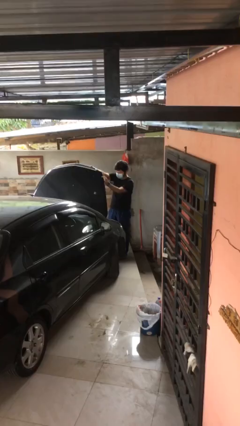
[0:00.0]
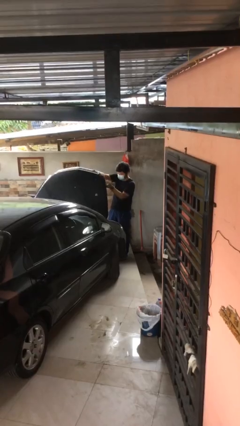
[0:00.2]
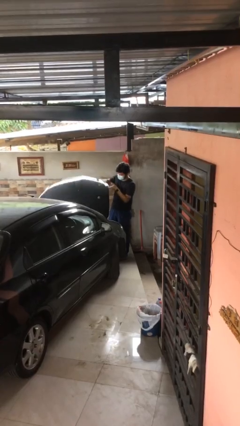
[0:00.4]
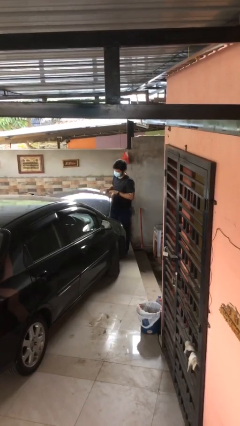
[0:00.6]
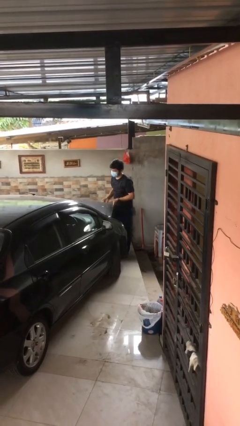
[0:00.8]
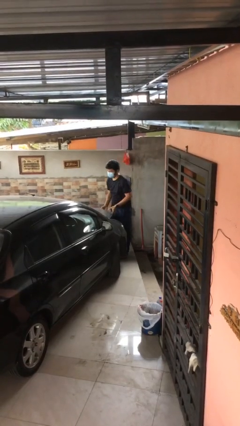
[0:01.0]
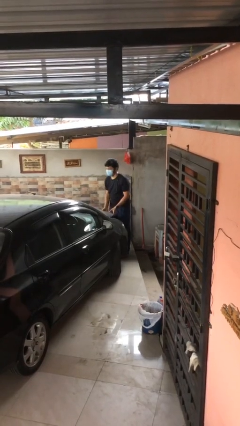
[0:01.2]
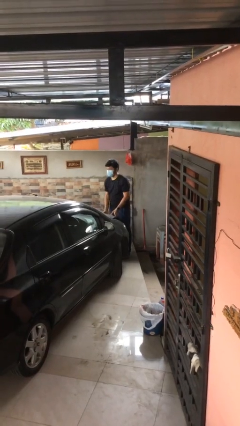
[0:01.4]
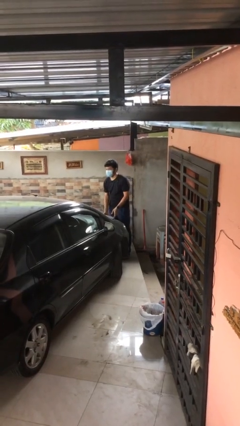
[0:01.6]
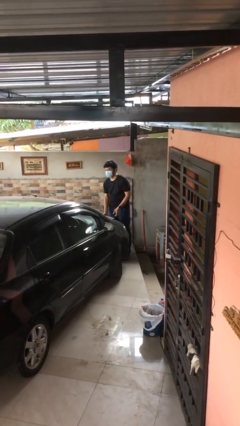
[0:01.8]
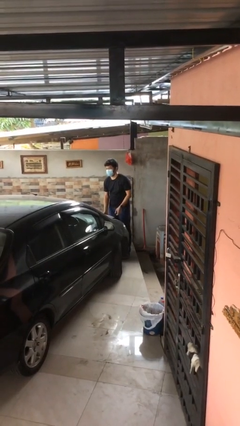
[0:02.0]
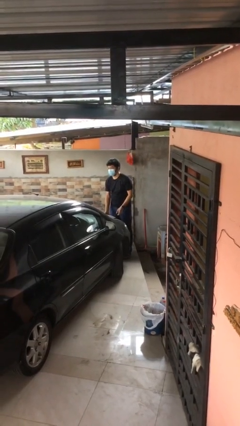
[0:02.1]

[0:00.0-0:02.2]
person closes car hood

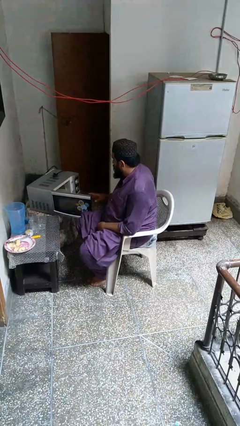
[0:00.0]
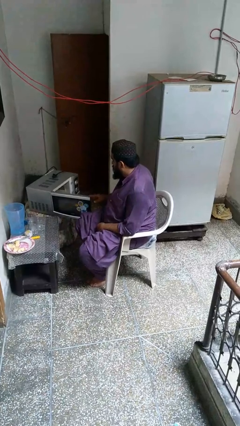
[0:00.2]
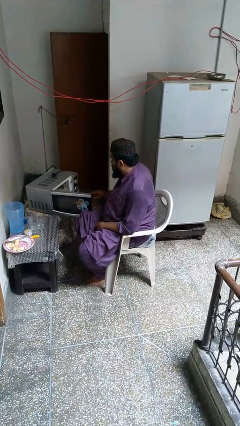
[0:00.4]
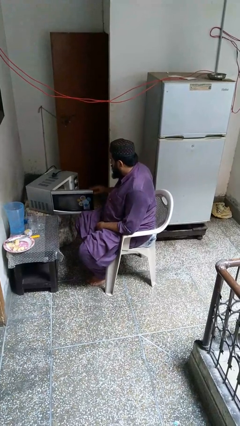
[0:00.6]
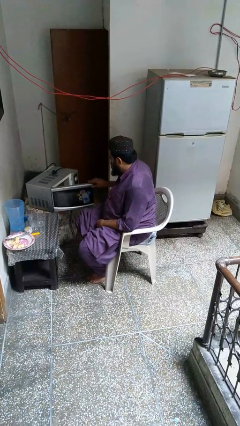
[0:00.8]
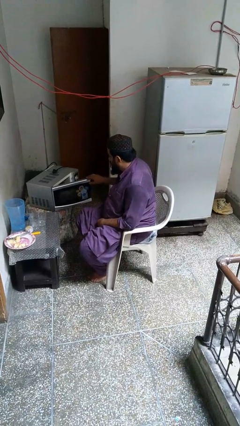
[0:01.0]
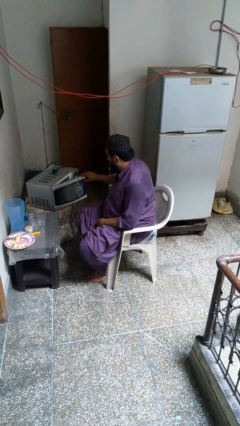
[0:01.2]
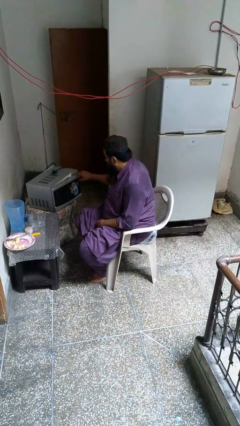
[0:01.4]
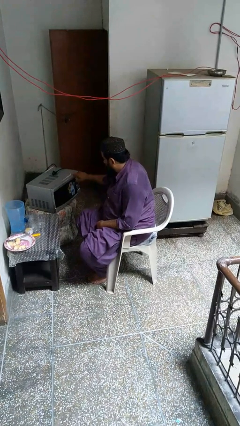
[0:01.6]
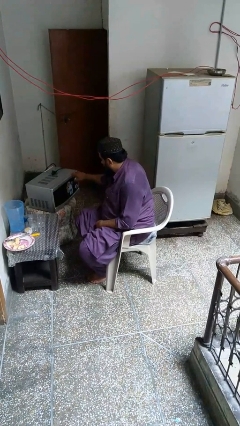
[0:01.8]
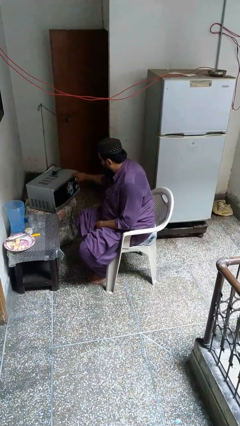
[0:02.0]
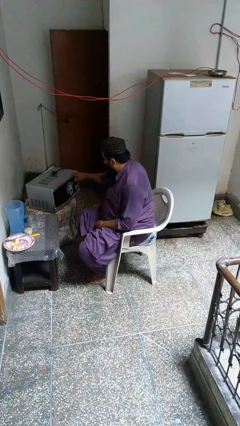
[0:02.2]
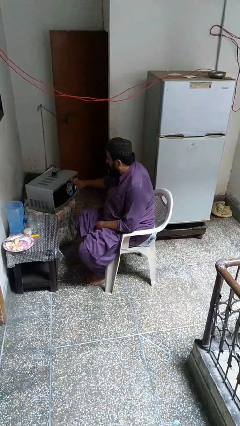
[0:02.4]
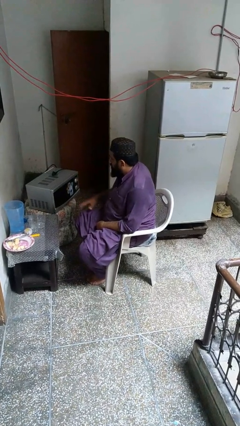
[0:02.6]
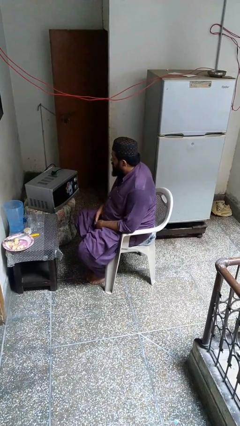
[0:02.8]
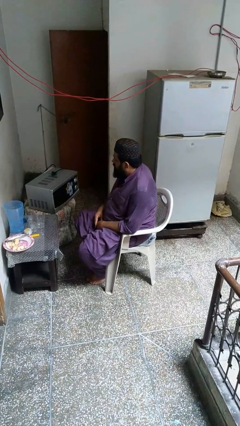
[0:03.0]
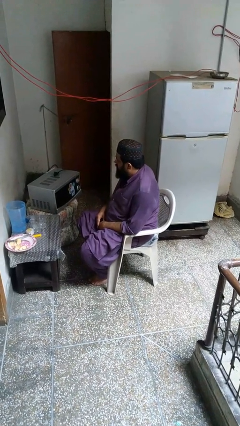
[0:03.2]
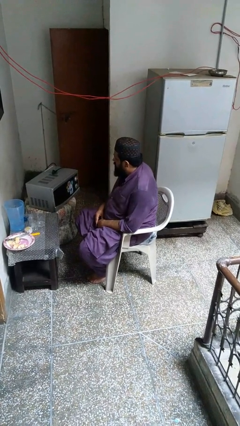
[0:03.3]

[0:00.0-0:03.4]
person closes microwave

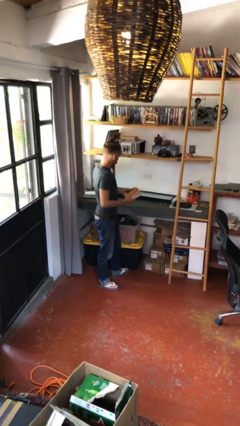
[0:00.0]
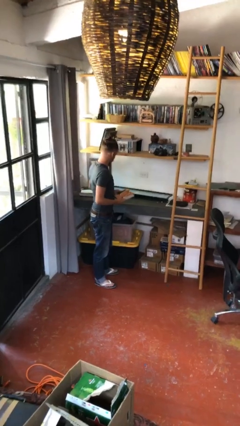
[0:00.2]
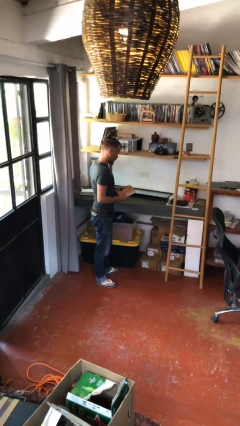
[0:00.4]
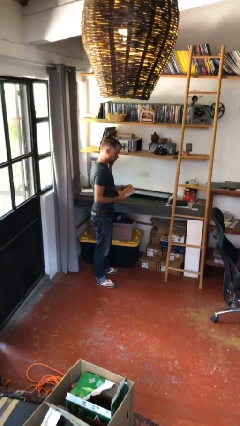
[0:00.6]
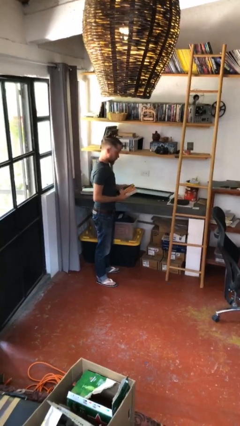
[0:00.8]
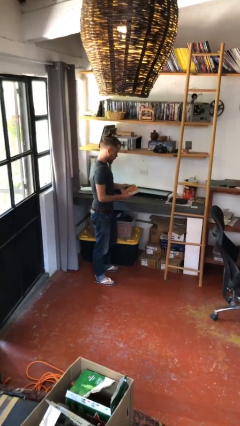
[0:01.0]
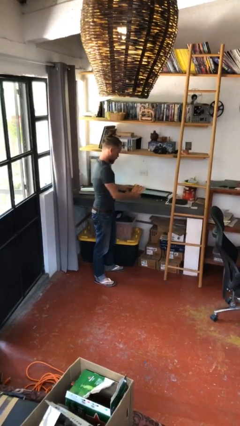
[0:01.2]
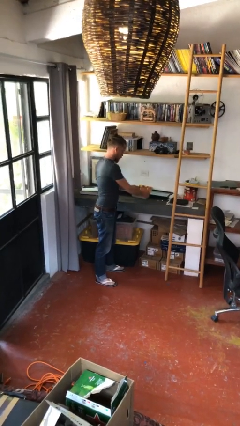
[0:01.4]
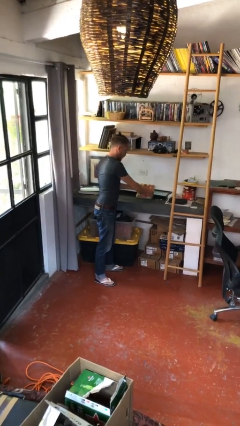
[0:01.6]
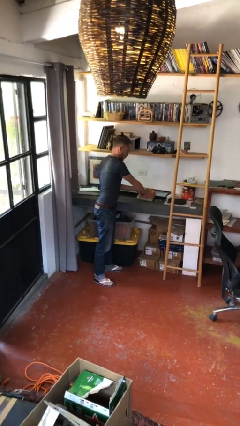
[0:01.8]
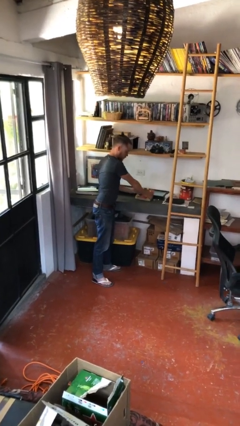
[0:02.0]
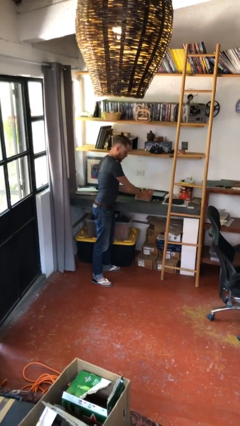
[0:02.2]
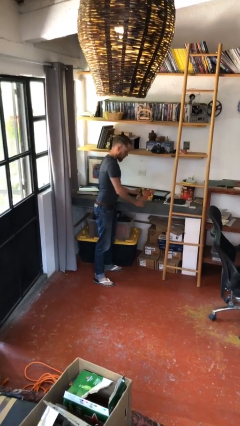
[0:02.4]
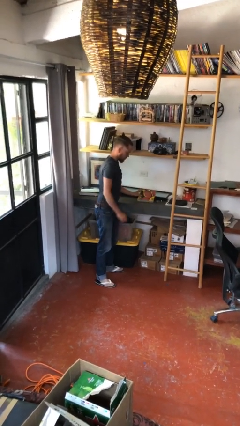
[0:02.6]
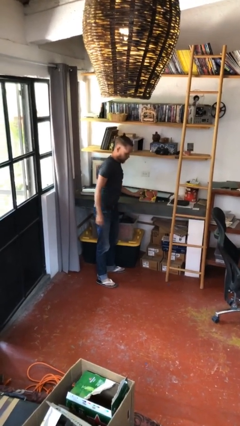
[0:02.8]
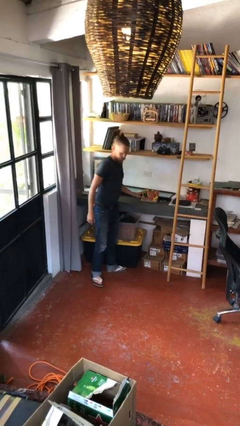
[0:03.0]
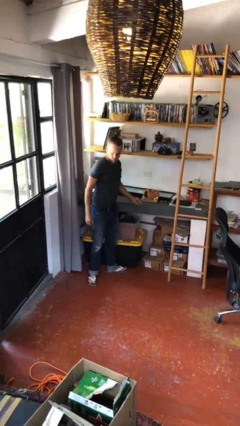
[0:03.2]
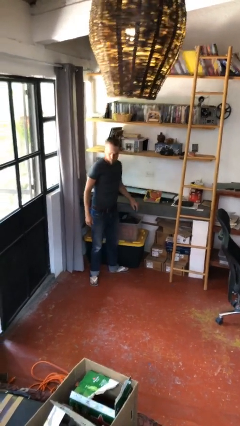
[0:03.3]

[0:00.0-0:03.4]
person puts down object on table

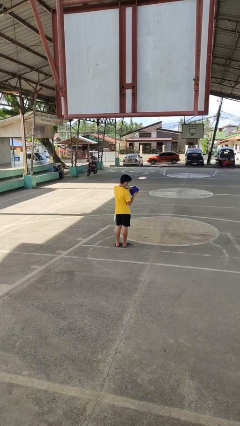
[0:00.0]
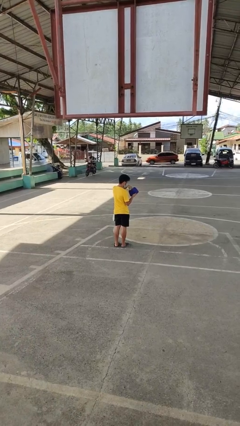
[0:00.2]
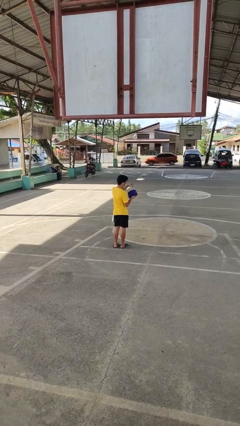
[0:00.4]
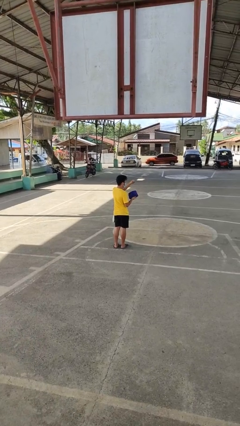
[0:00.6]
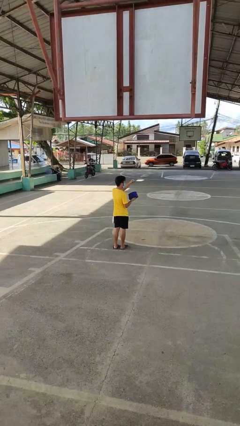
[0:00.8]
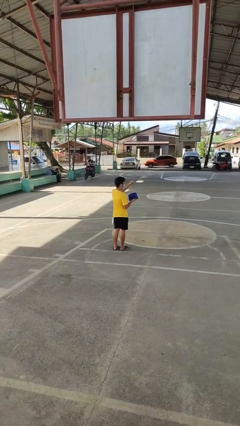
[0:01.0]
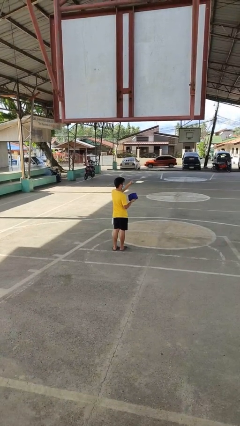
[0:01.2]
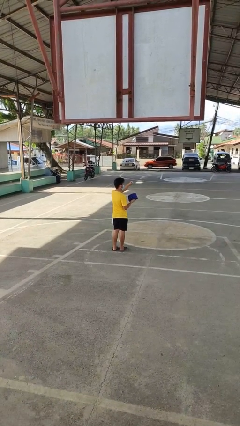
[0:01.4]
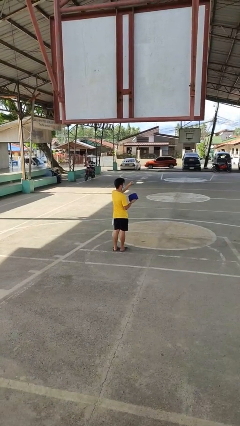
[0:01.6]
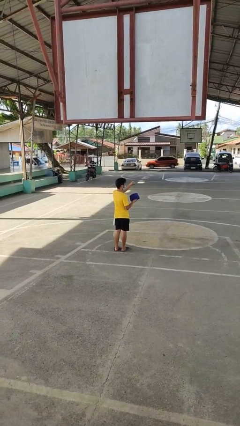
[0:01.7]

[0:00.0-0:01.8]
person takes object from purse

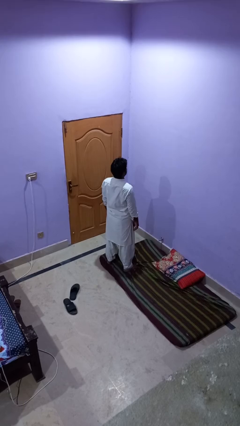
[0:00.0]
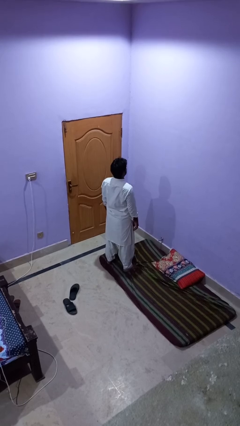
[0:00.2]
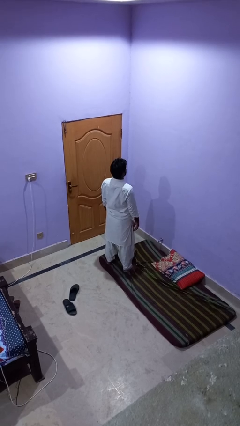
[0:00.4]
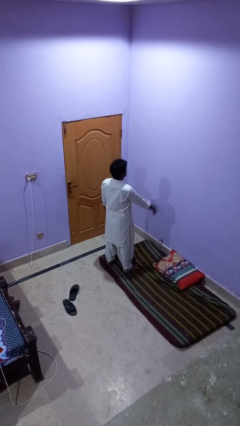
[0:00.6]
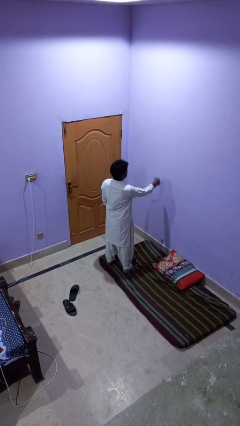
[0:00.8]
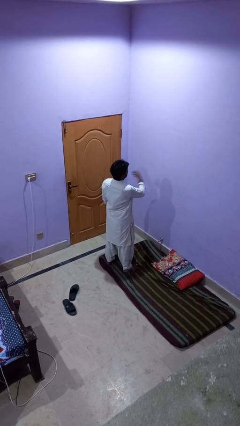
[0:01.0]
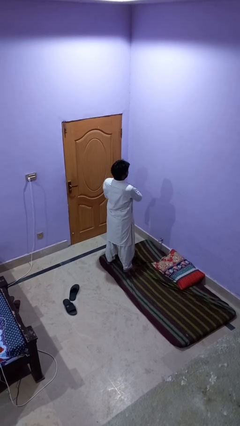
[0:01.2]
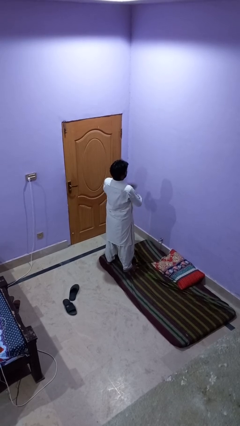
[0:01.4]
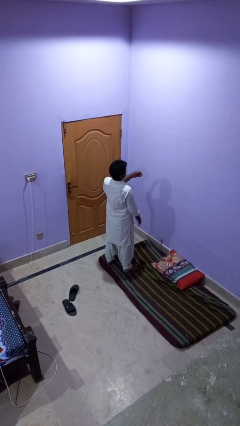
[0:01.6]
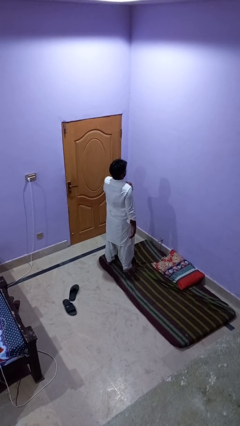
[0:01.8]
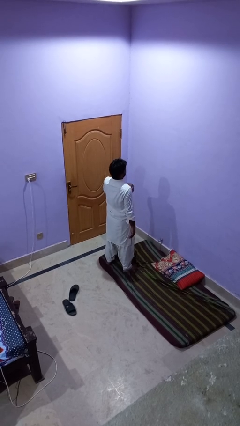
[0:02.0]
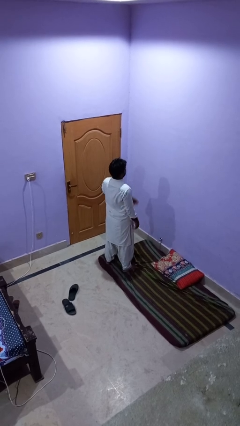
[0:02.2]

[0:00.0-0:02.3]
person drums on chest

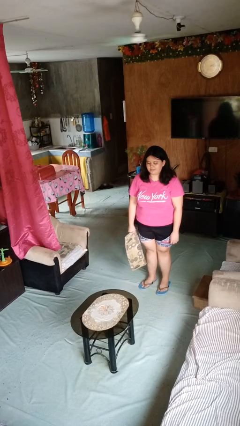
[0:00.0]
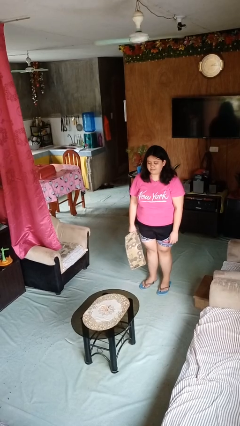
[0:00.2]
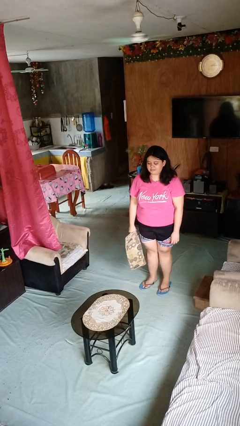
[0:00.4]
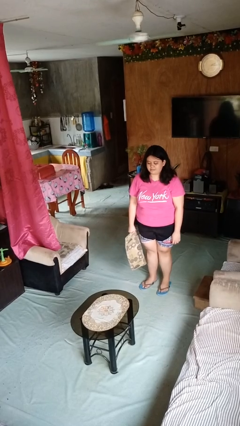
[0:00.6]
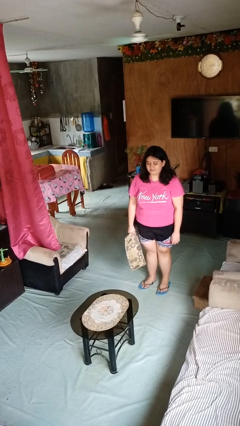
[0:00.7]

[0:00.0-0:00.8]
person throws object on table

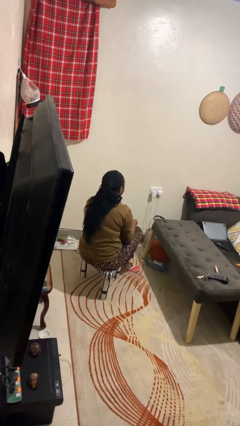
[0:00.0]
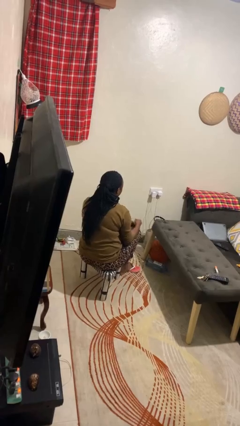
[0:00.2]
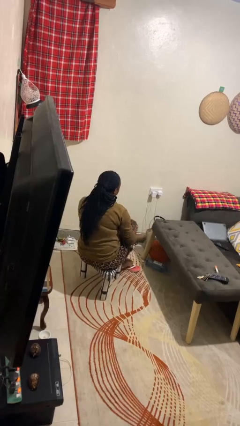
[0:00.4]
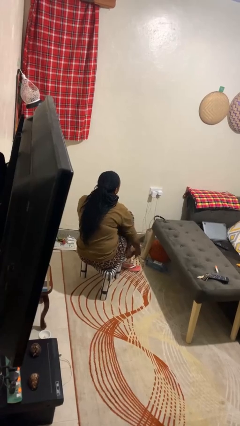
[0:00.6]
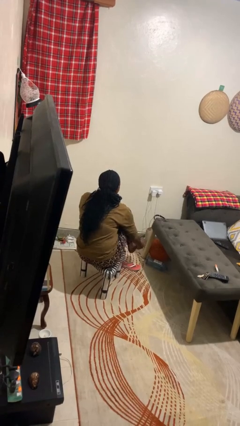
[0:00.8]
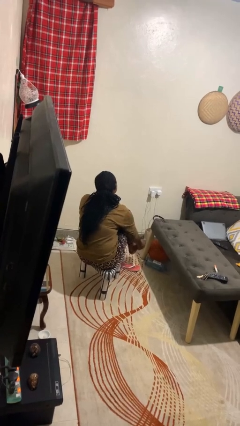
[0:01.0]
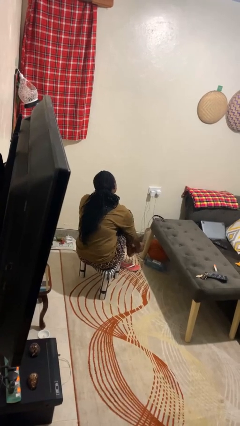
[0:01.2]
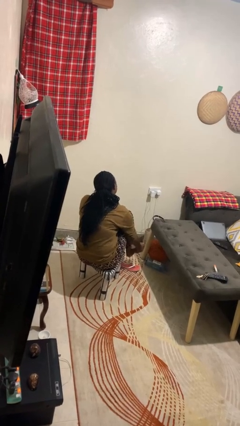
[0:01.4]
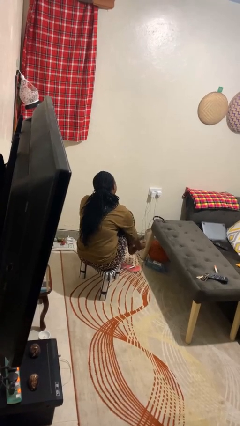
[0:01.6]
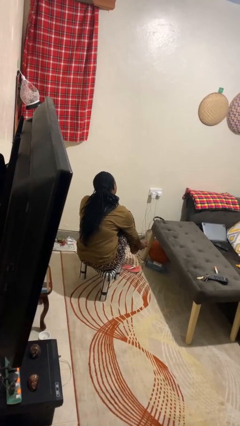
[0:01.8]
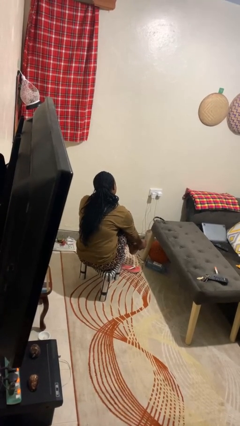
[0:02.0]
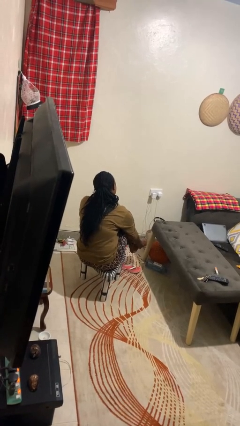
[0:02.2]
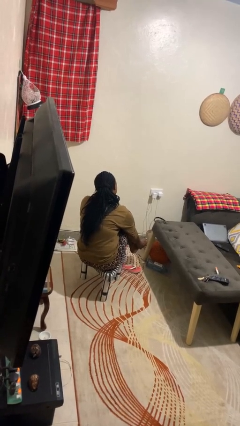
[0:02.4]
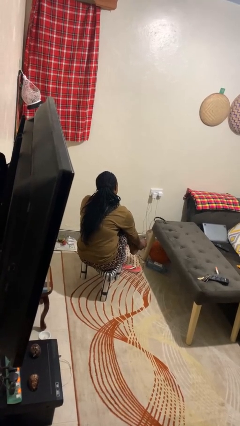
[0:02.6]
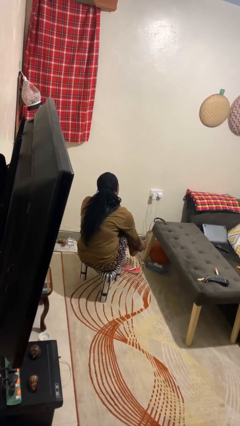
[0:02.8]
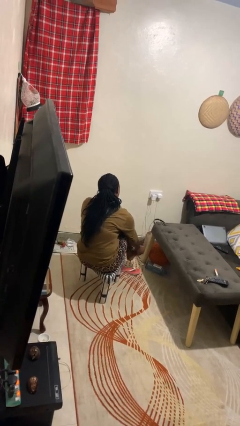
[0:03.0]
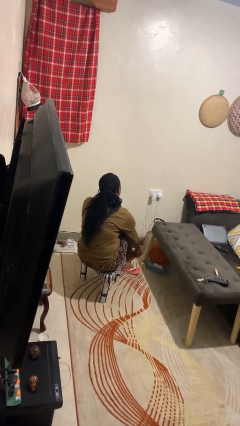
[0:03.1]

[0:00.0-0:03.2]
person rubs foot

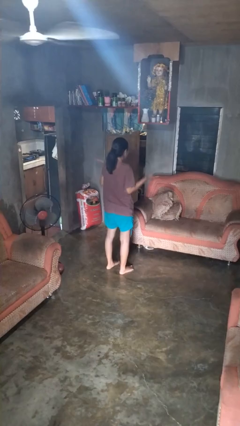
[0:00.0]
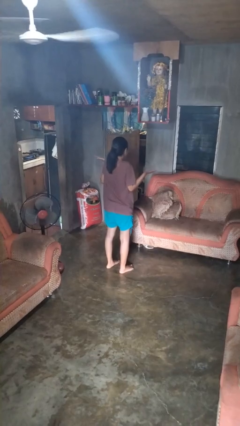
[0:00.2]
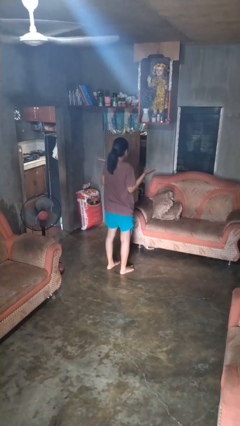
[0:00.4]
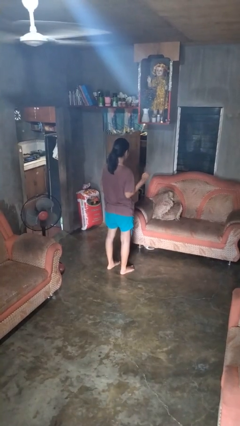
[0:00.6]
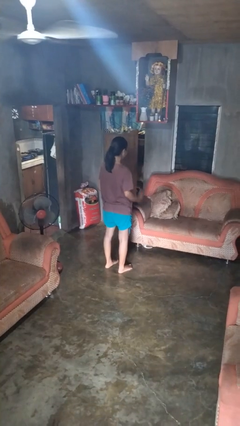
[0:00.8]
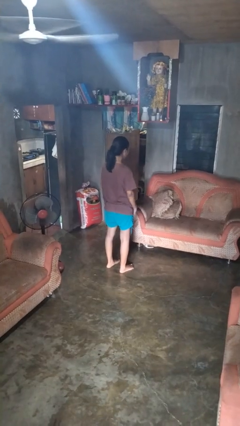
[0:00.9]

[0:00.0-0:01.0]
person shrugs